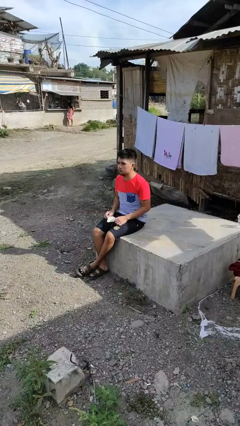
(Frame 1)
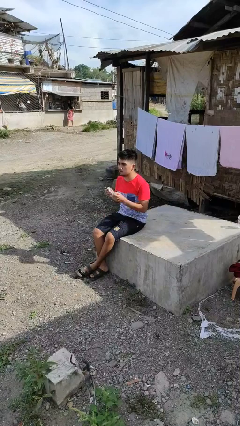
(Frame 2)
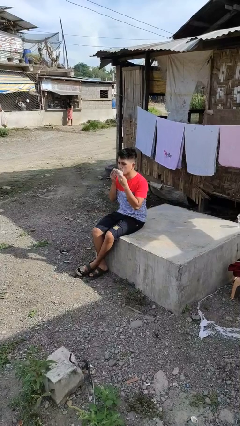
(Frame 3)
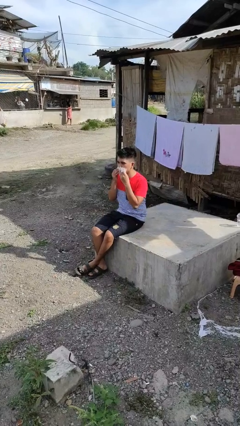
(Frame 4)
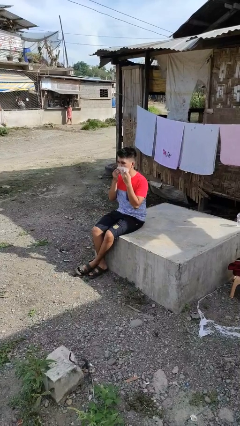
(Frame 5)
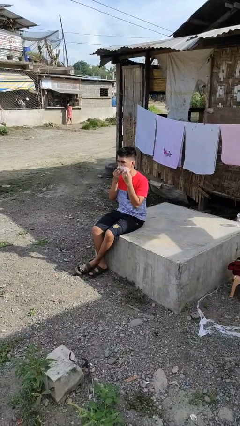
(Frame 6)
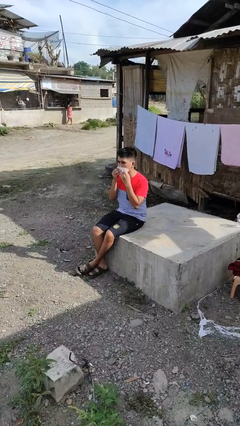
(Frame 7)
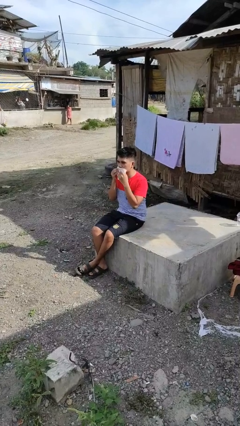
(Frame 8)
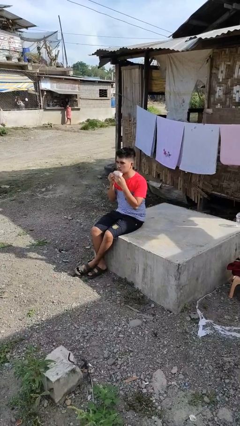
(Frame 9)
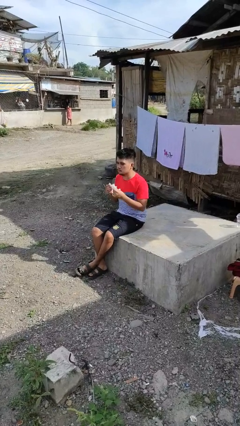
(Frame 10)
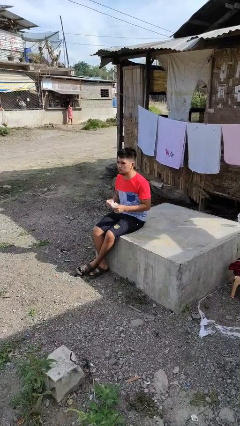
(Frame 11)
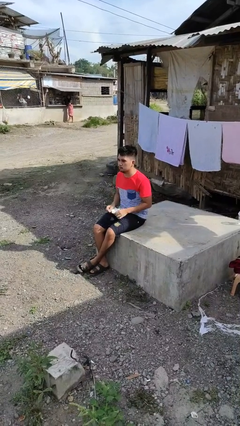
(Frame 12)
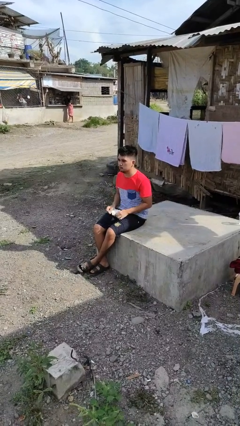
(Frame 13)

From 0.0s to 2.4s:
person wipes mouth with napkin

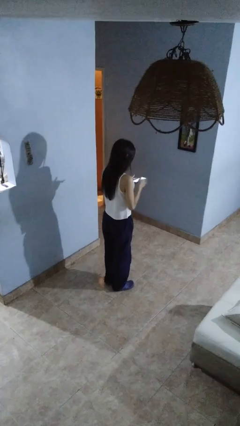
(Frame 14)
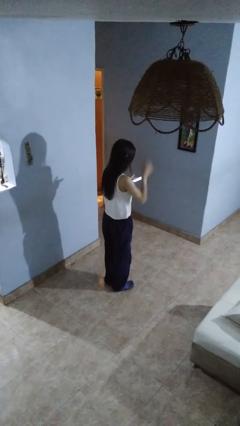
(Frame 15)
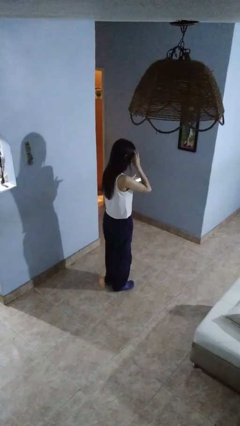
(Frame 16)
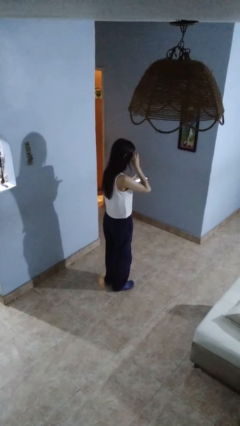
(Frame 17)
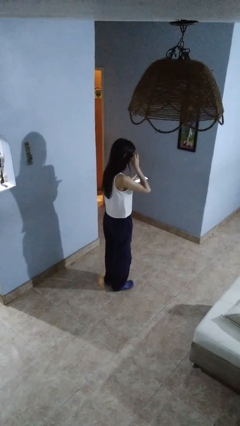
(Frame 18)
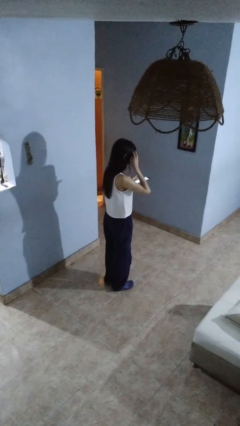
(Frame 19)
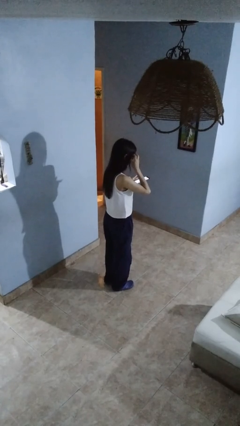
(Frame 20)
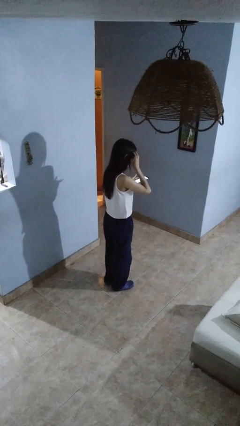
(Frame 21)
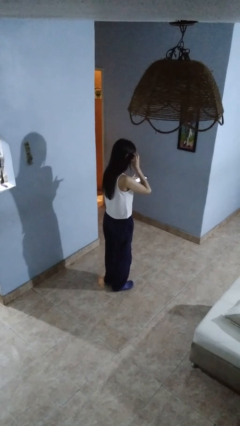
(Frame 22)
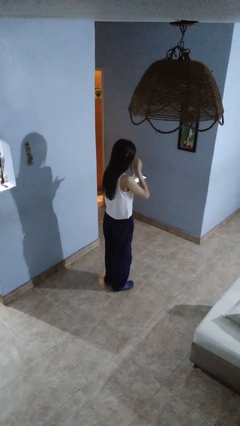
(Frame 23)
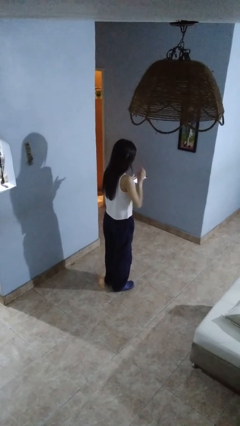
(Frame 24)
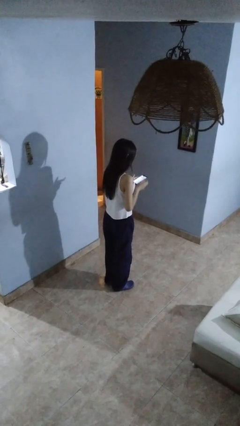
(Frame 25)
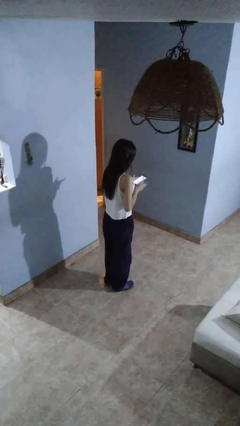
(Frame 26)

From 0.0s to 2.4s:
person scratches face

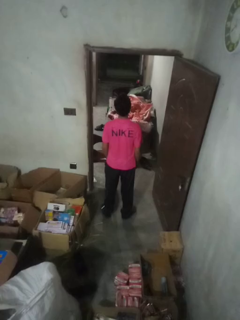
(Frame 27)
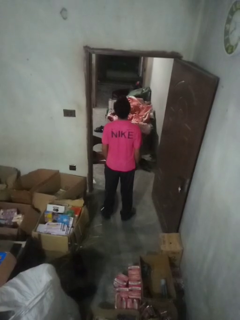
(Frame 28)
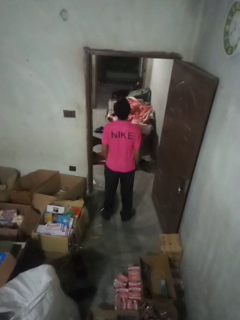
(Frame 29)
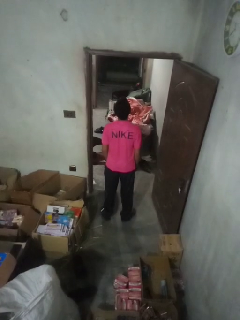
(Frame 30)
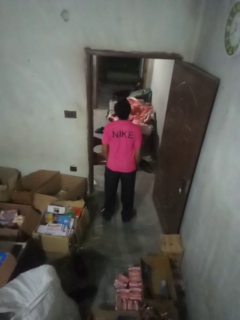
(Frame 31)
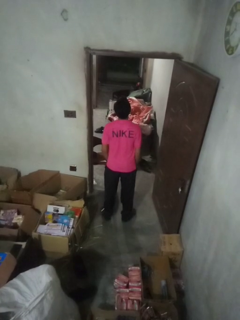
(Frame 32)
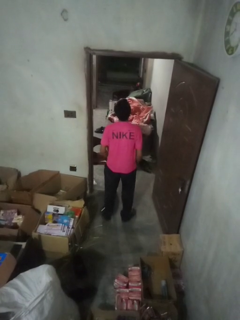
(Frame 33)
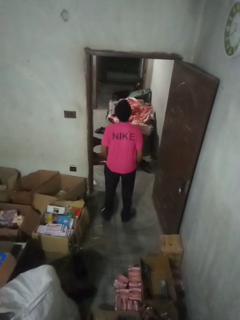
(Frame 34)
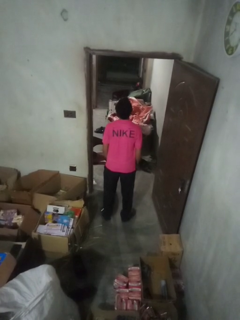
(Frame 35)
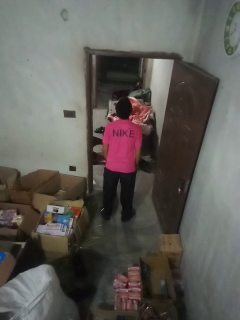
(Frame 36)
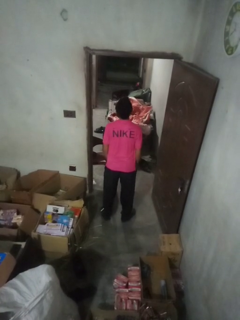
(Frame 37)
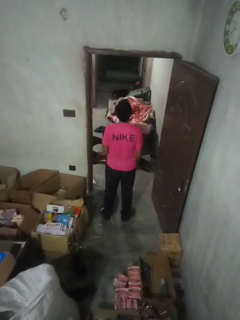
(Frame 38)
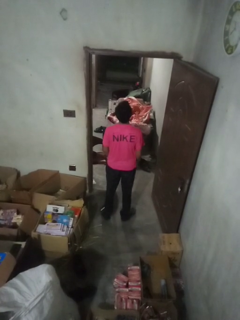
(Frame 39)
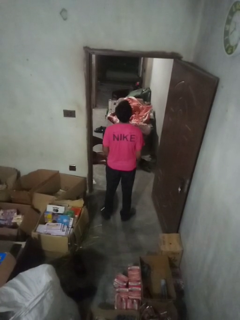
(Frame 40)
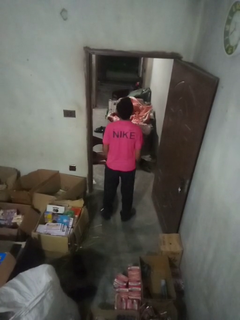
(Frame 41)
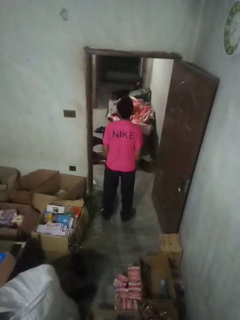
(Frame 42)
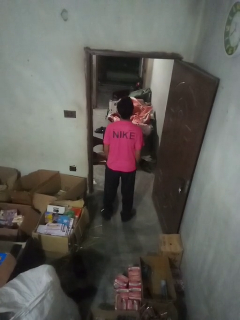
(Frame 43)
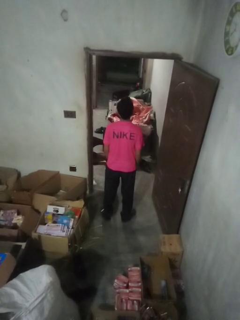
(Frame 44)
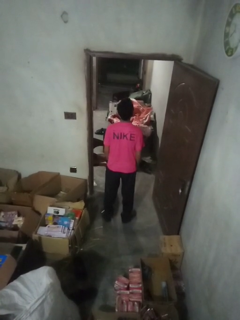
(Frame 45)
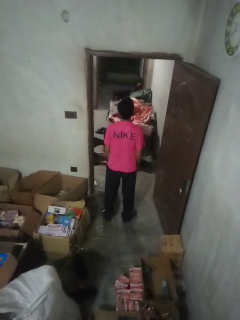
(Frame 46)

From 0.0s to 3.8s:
person wiggles hips

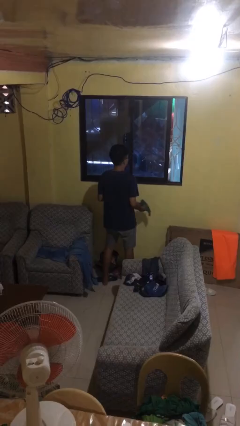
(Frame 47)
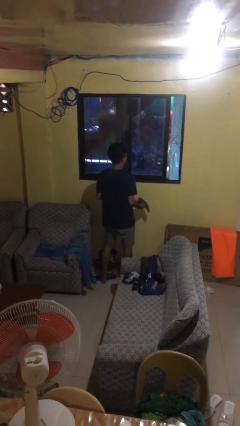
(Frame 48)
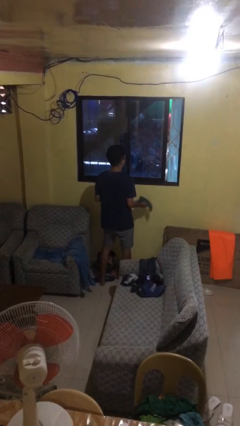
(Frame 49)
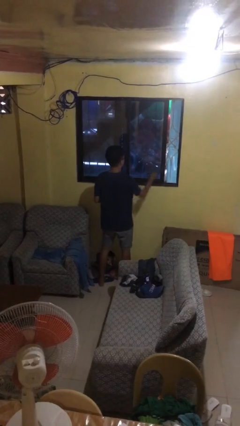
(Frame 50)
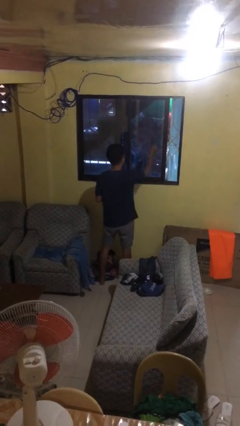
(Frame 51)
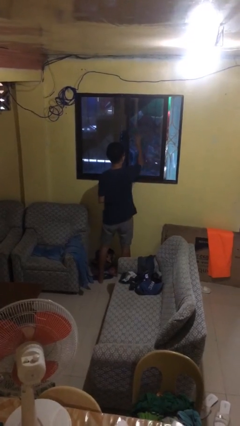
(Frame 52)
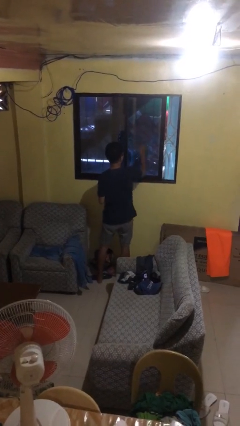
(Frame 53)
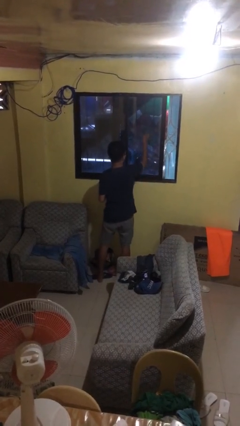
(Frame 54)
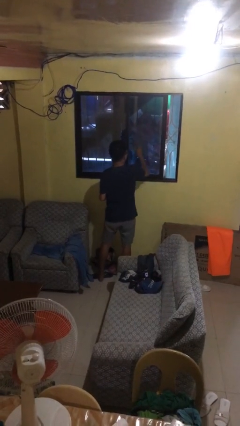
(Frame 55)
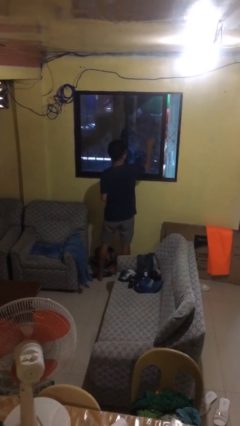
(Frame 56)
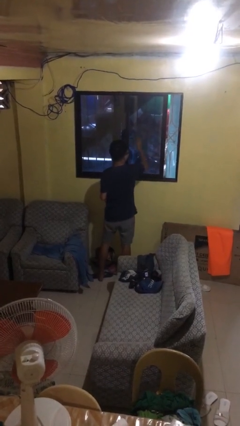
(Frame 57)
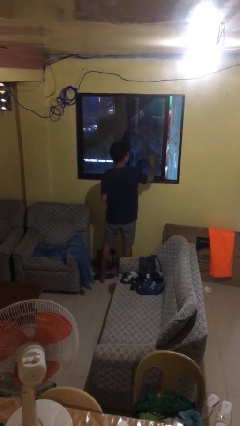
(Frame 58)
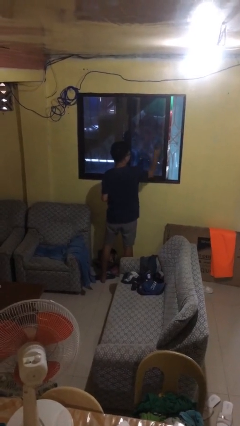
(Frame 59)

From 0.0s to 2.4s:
person washes window

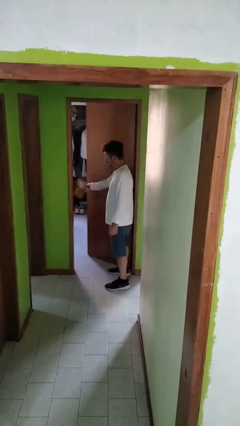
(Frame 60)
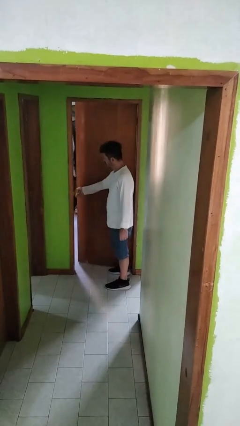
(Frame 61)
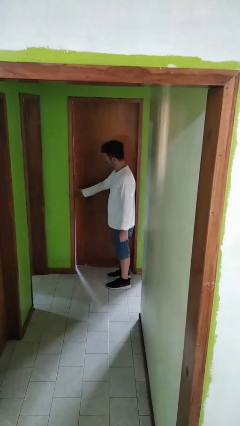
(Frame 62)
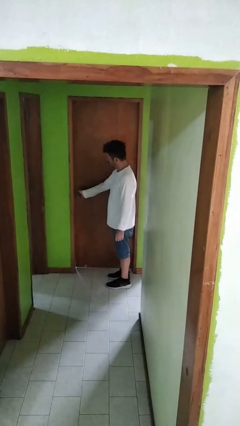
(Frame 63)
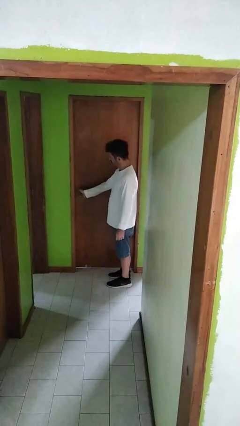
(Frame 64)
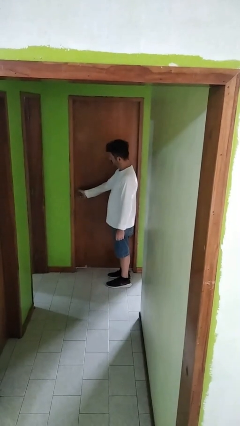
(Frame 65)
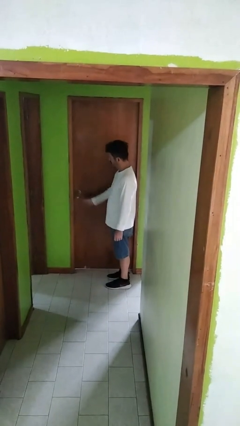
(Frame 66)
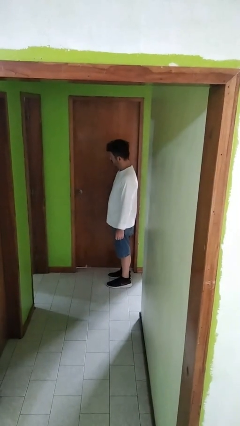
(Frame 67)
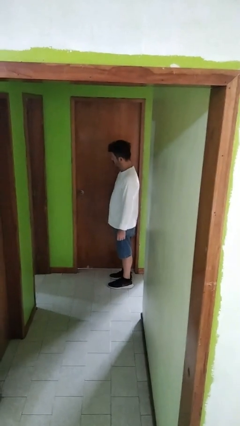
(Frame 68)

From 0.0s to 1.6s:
person closes facility door

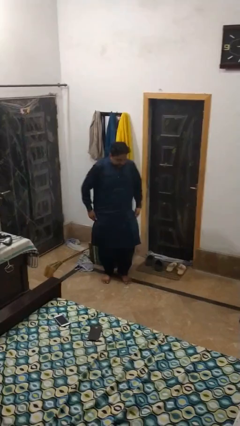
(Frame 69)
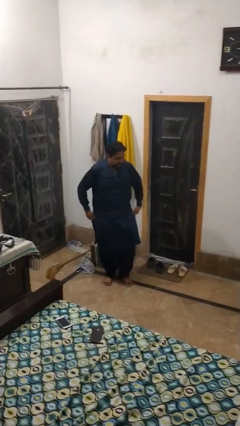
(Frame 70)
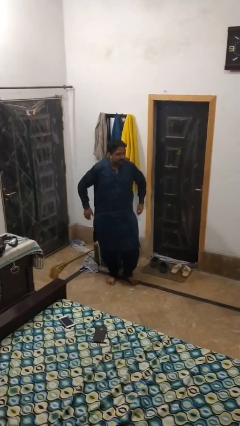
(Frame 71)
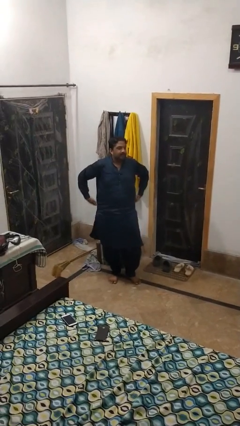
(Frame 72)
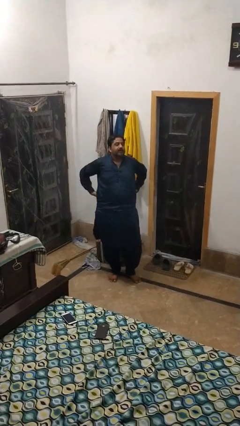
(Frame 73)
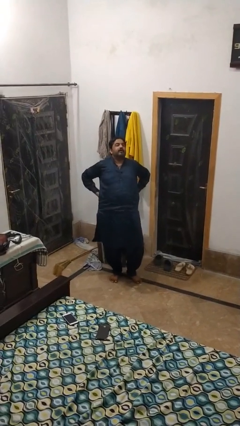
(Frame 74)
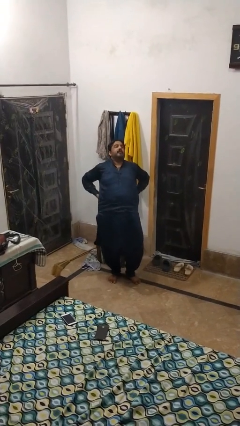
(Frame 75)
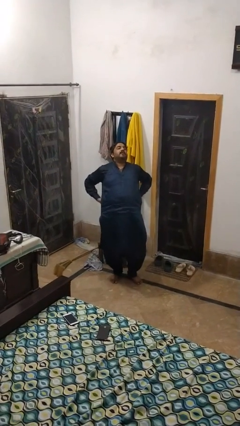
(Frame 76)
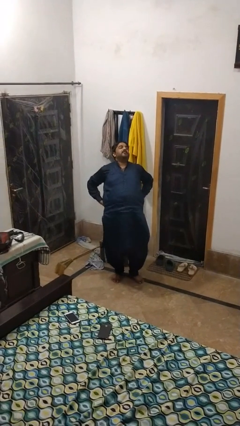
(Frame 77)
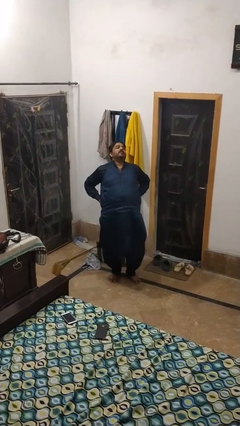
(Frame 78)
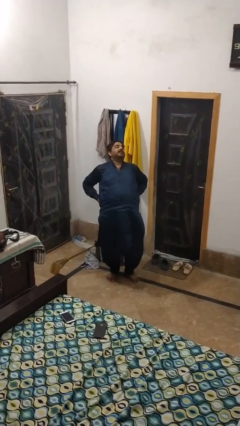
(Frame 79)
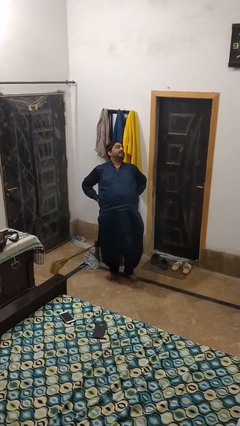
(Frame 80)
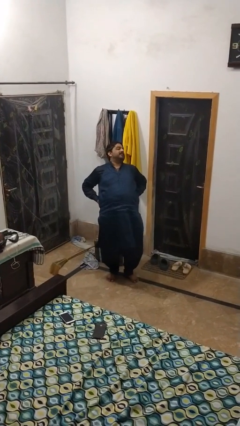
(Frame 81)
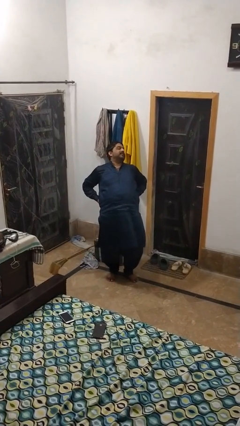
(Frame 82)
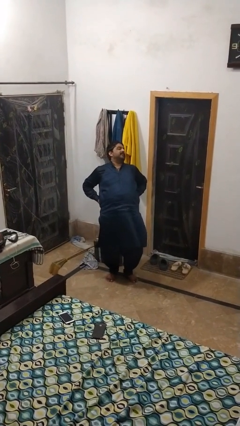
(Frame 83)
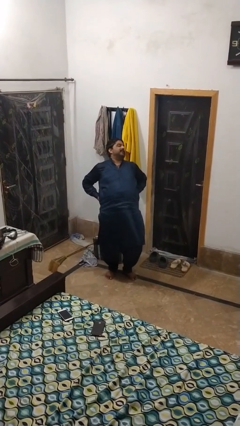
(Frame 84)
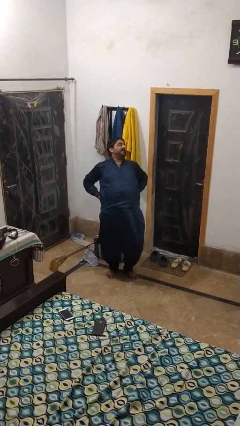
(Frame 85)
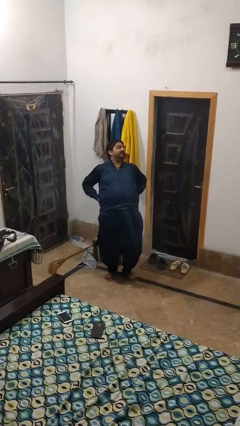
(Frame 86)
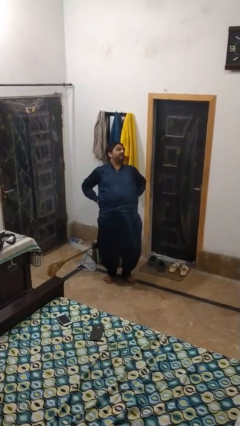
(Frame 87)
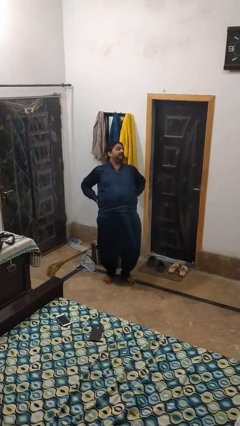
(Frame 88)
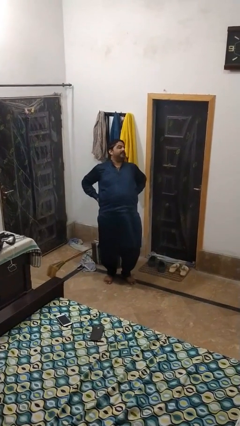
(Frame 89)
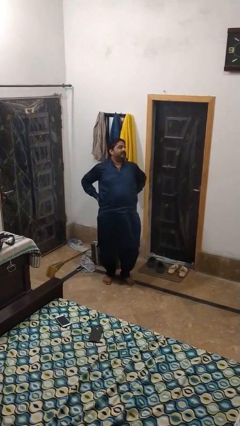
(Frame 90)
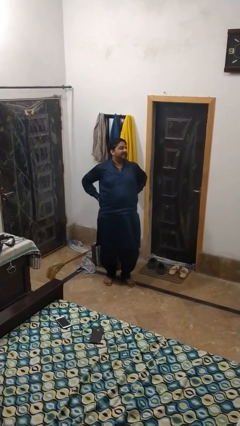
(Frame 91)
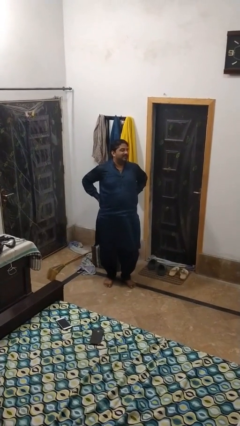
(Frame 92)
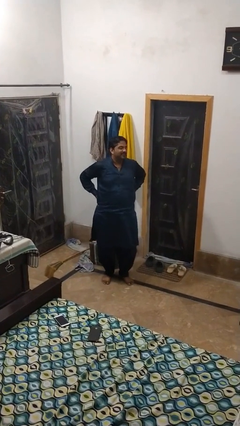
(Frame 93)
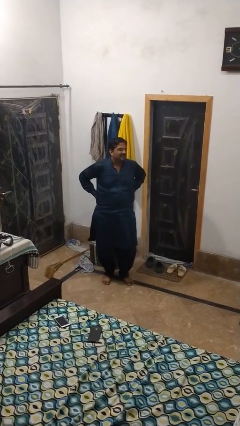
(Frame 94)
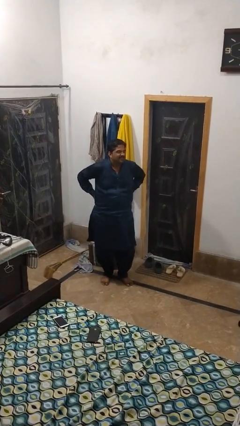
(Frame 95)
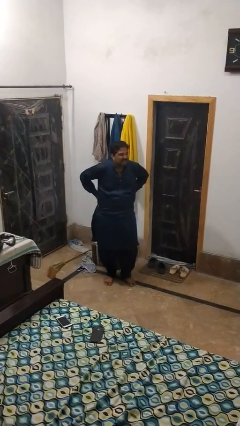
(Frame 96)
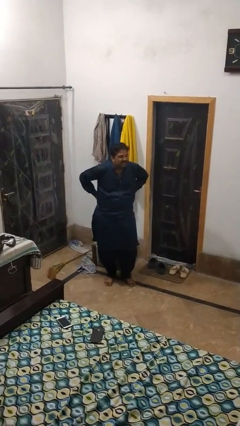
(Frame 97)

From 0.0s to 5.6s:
person stretches back
